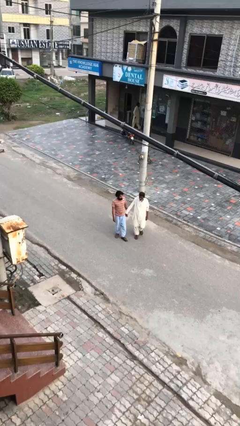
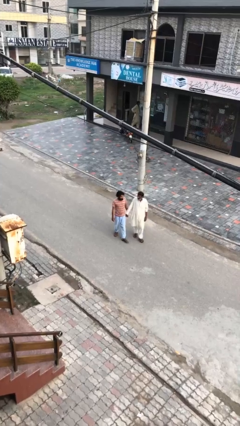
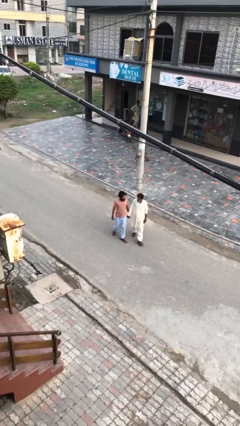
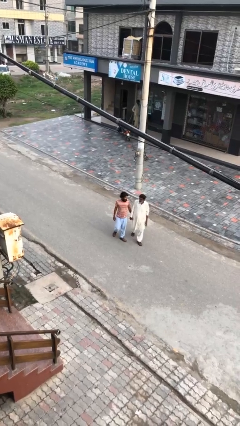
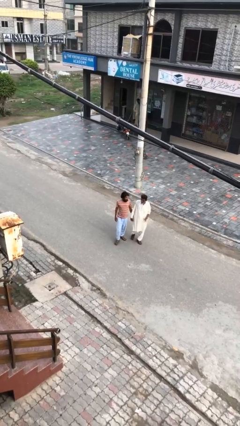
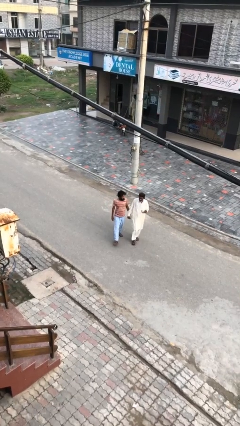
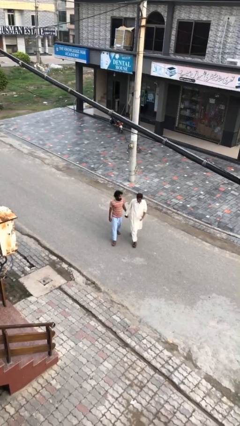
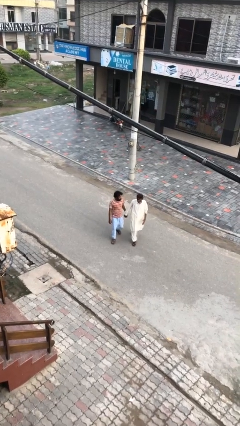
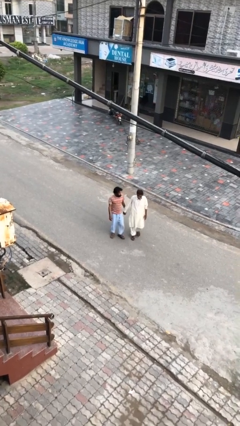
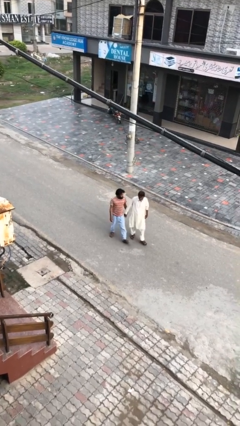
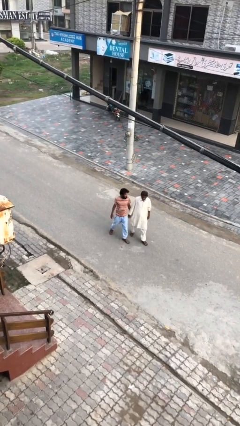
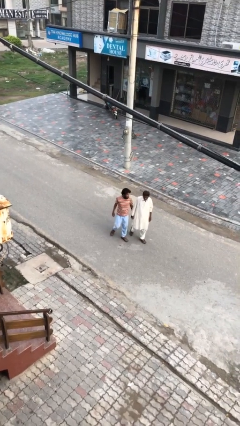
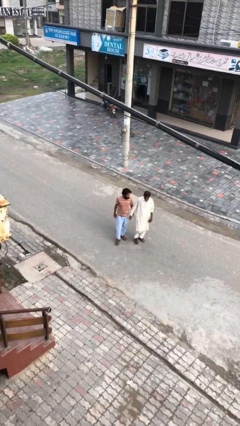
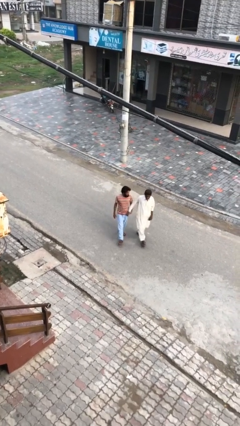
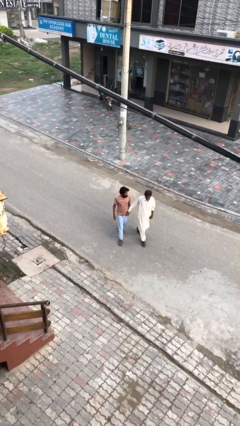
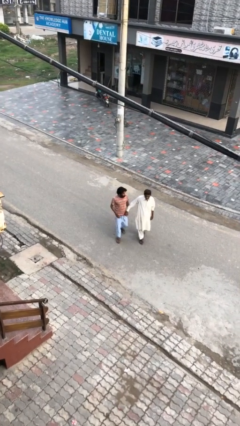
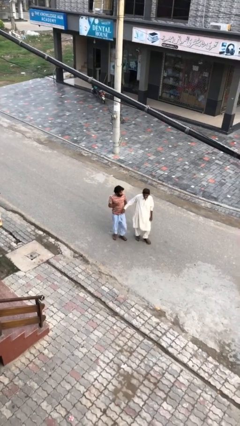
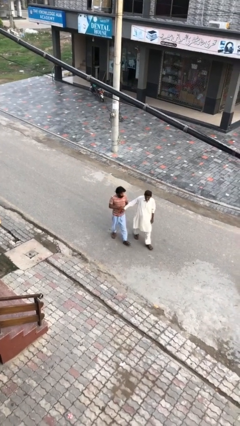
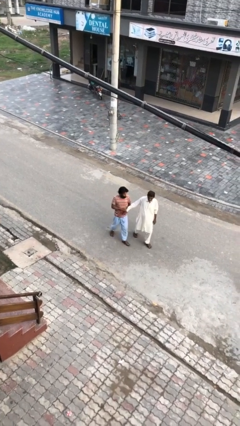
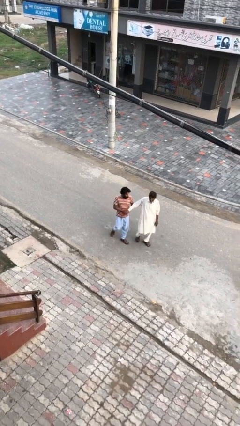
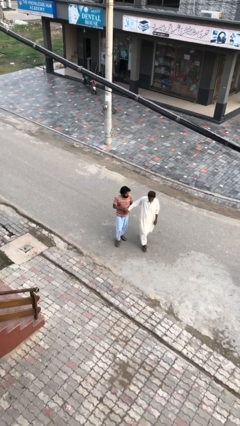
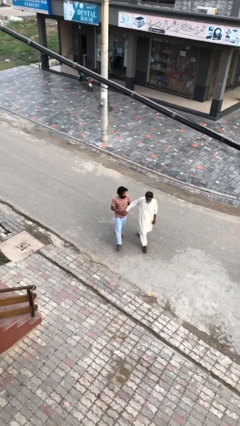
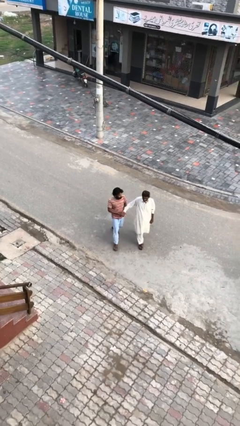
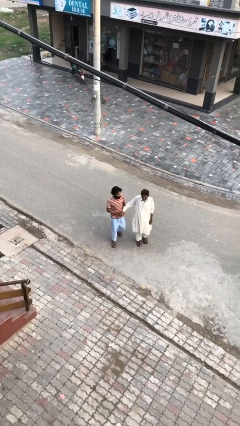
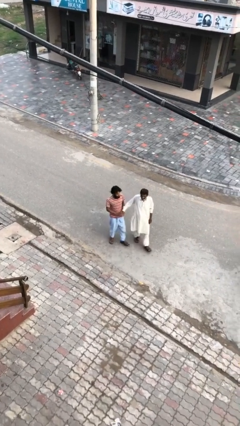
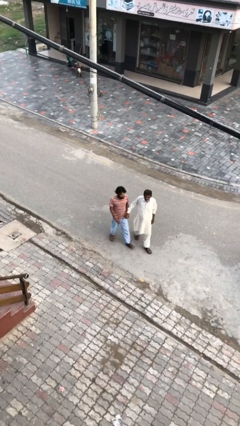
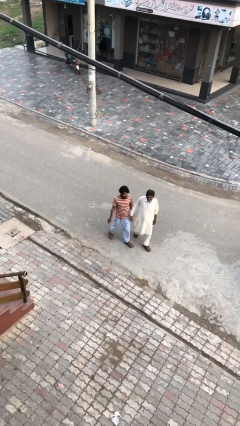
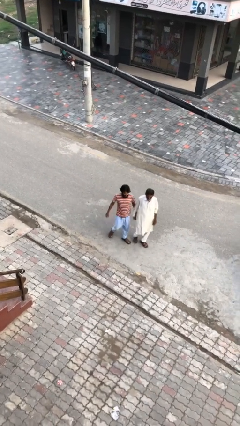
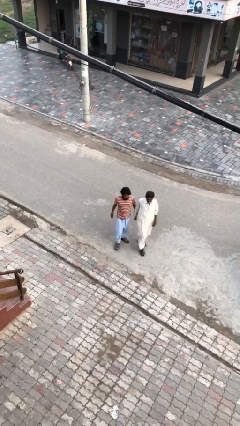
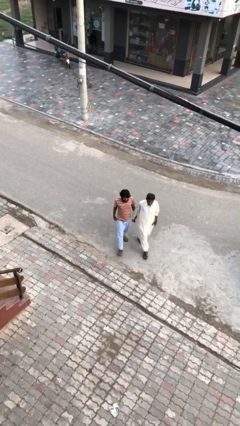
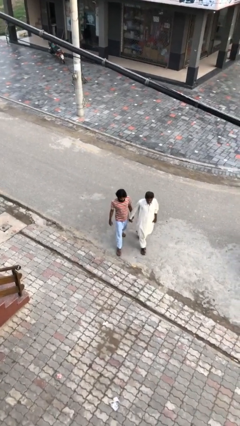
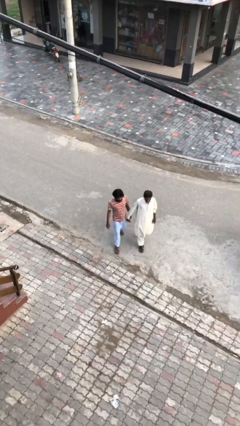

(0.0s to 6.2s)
person holds hand

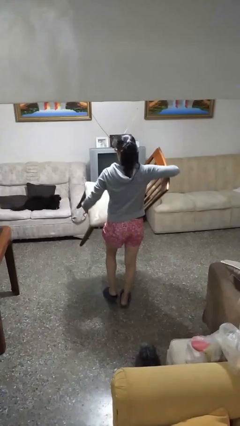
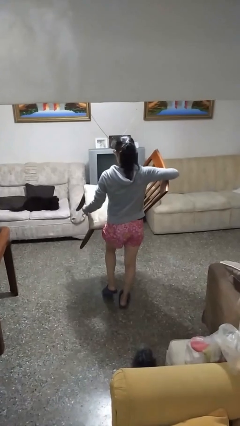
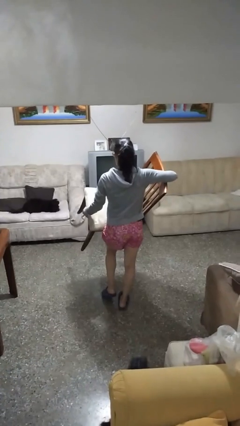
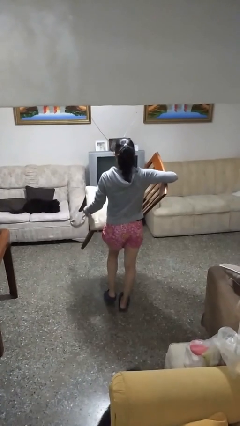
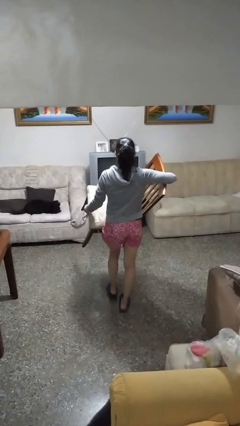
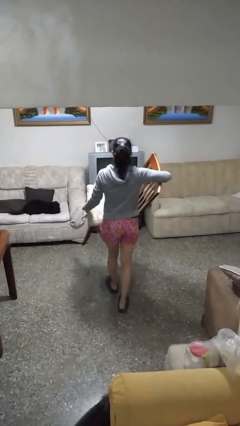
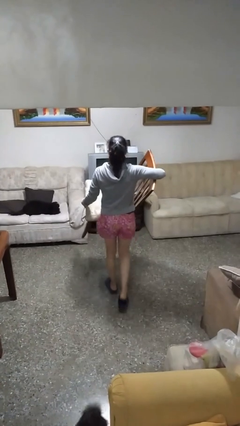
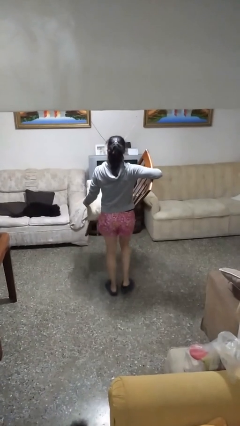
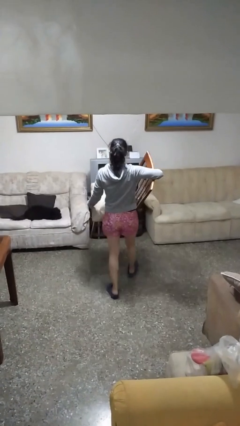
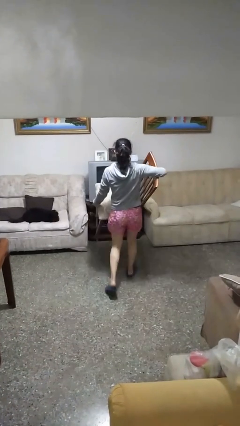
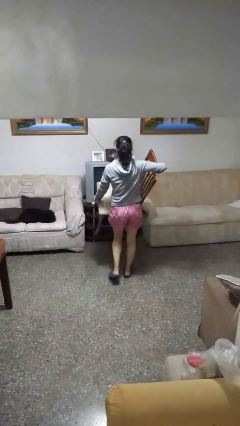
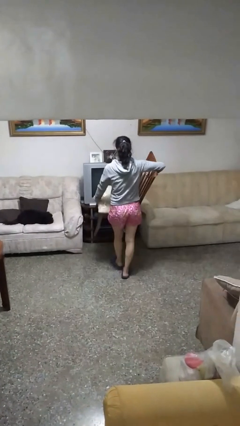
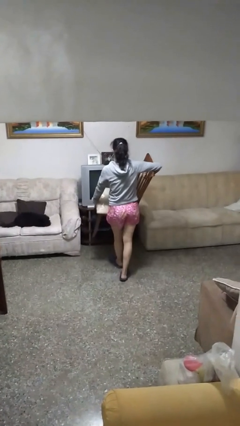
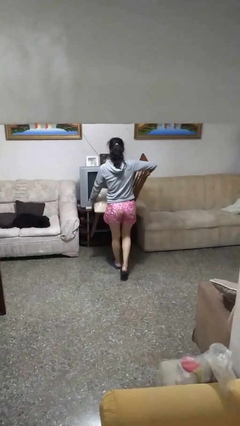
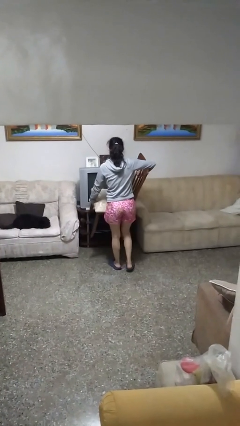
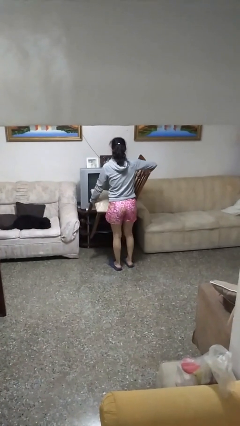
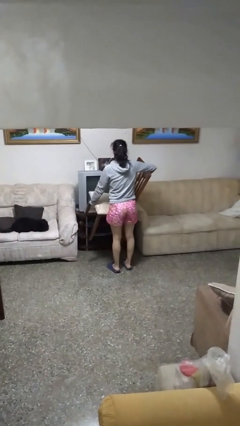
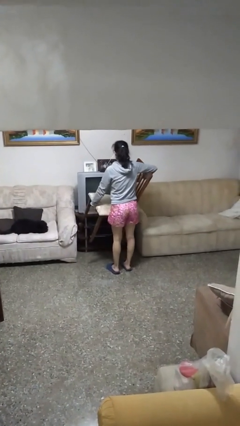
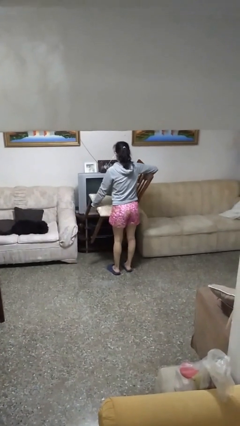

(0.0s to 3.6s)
person carries furniture

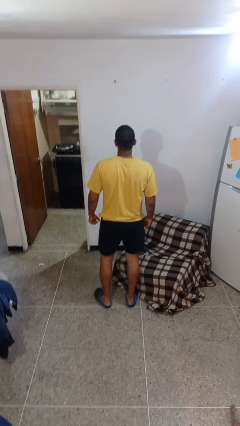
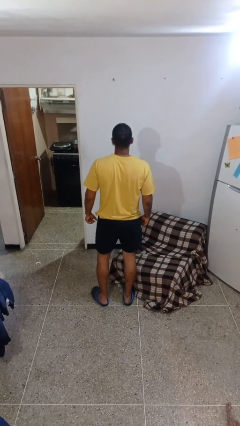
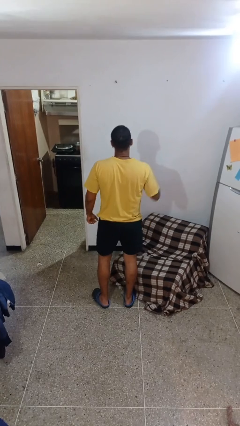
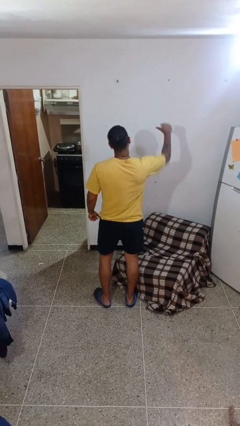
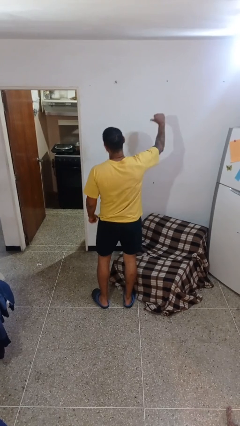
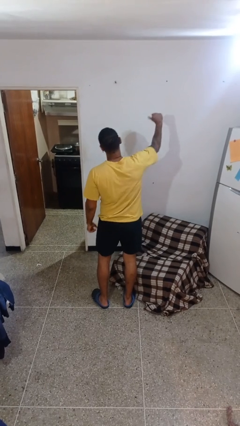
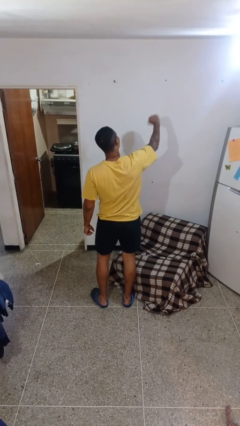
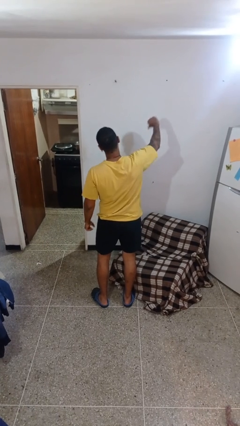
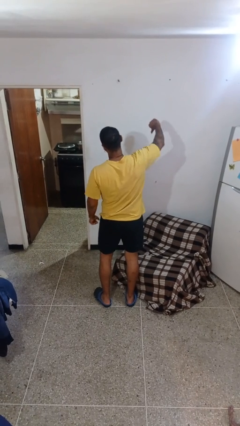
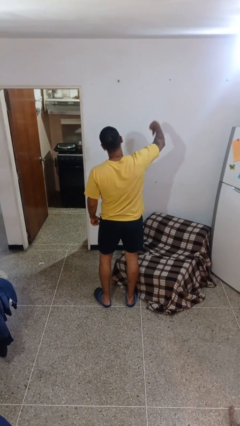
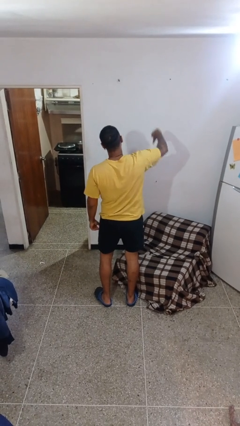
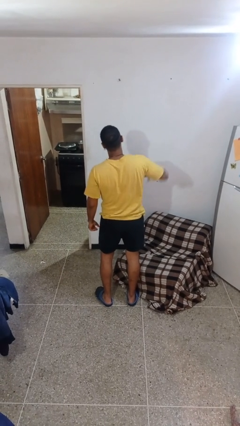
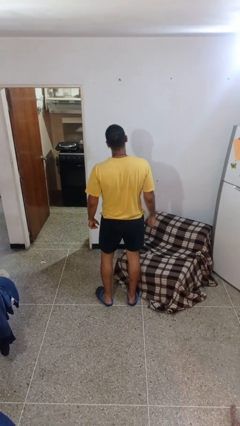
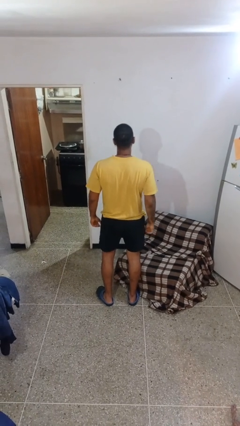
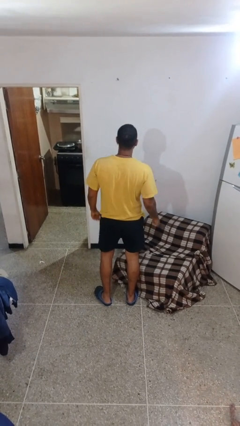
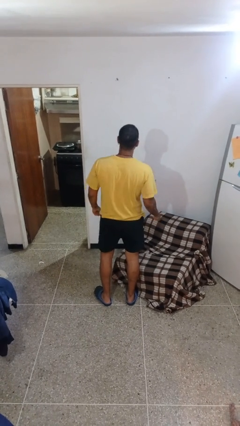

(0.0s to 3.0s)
person gestures thumbs down

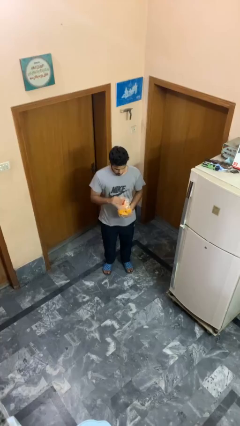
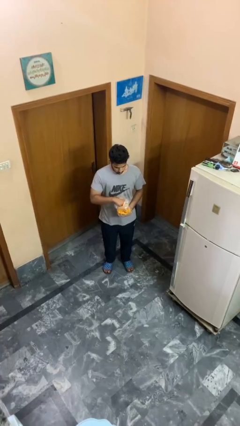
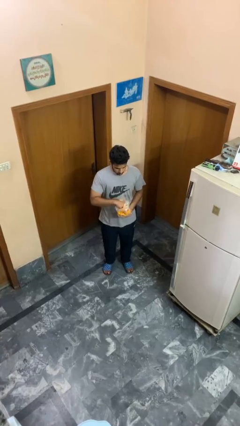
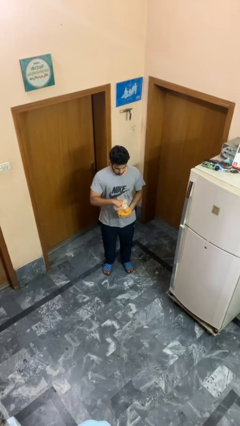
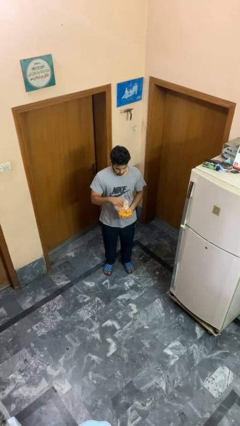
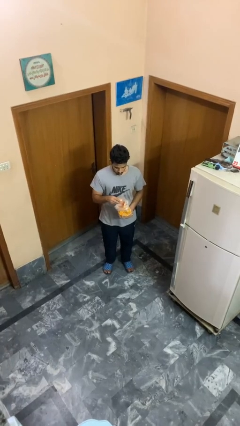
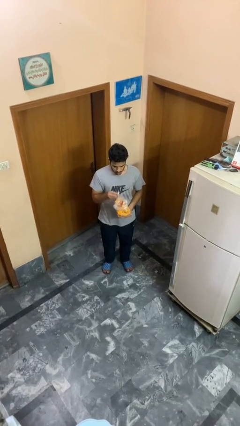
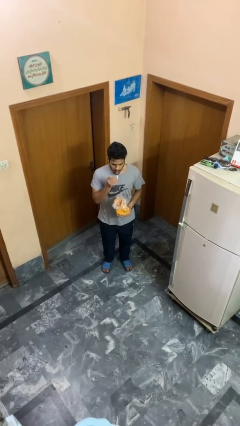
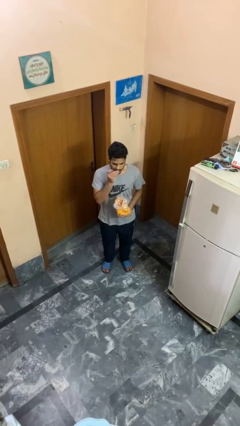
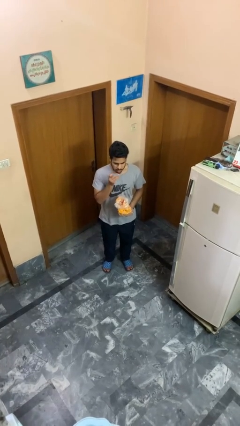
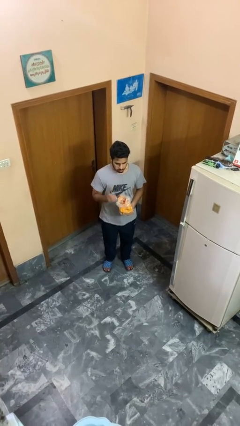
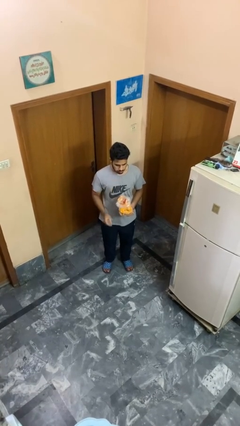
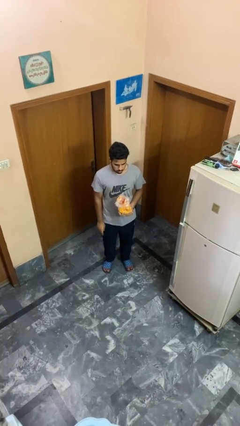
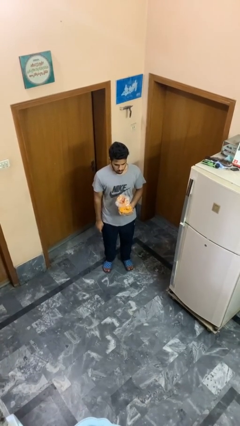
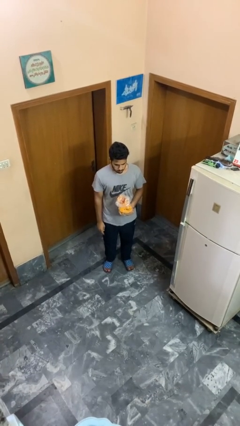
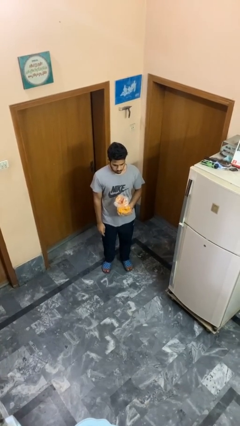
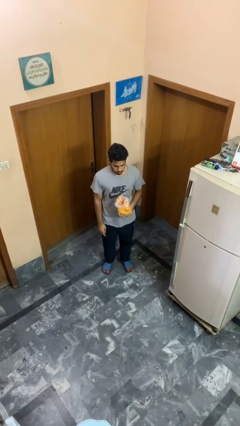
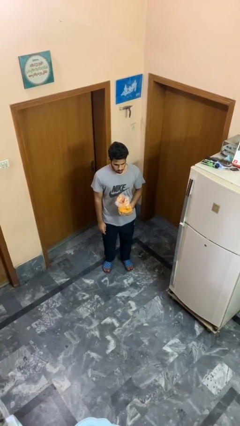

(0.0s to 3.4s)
person eats snack from bag

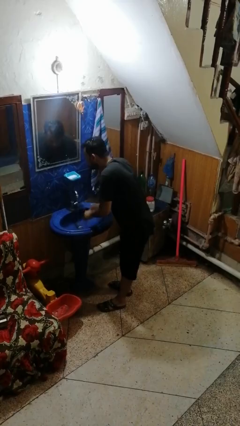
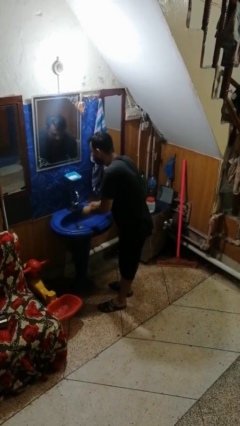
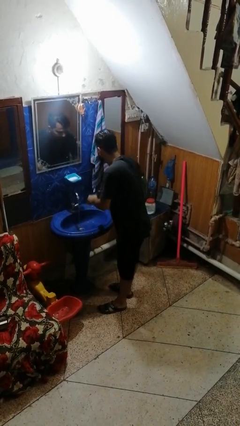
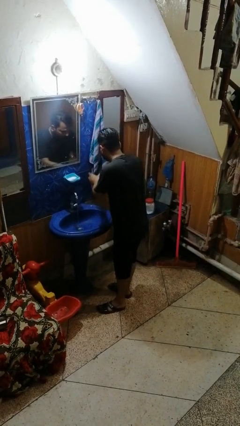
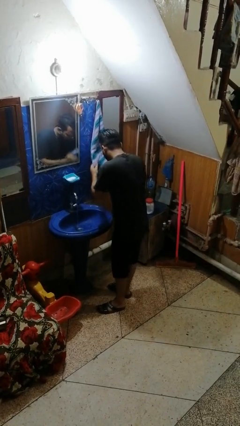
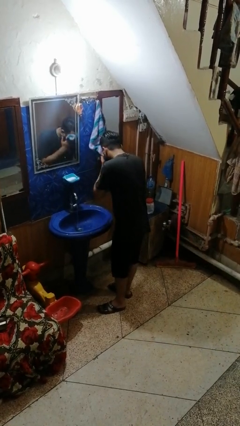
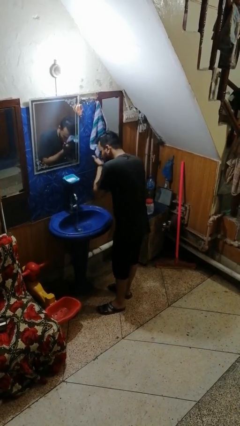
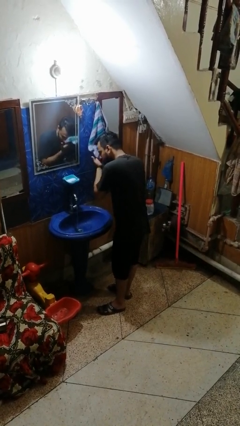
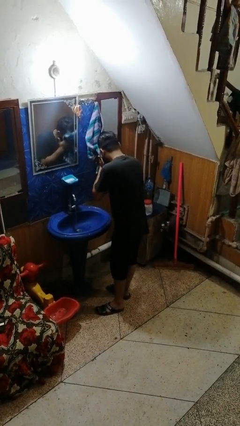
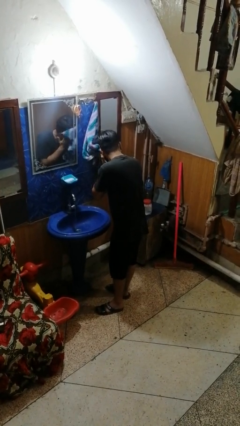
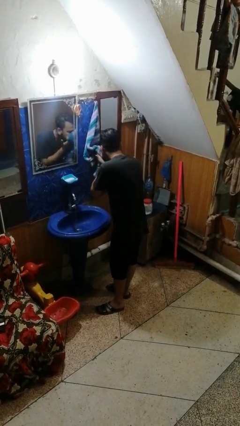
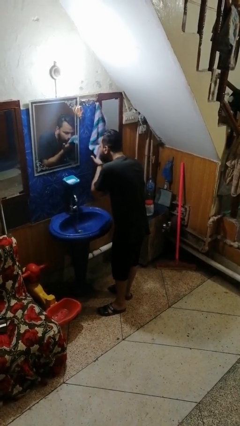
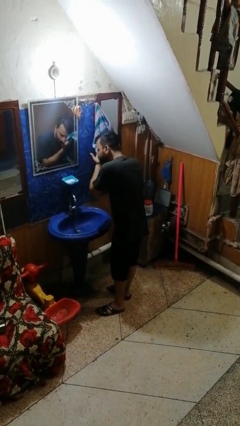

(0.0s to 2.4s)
person dries face with towel
